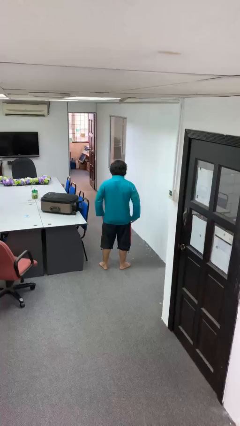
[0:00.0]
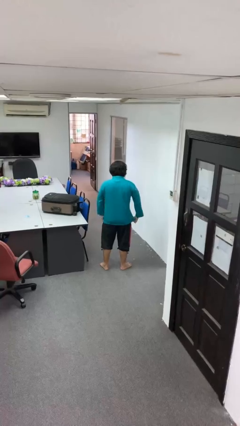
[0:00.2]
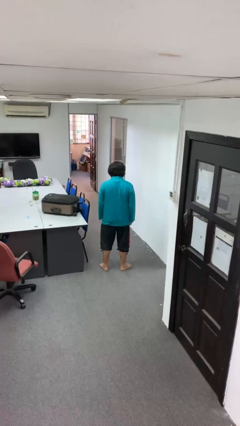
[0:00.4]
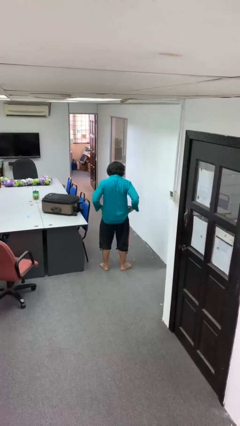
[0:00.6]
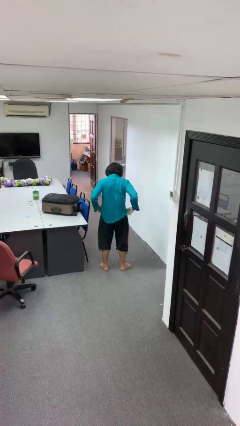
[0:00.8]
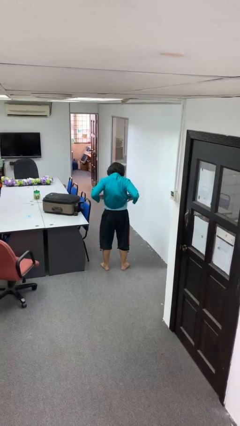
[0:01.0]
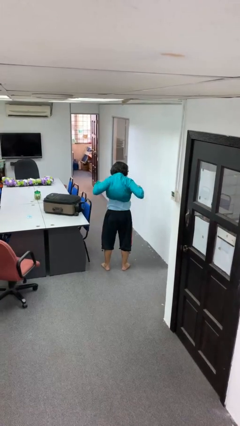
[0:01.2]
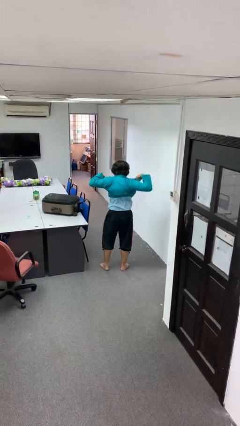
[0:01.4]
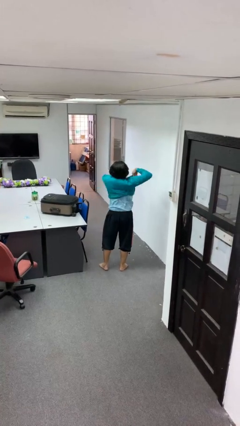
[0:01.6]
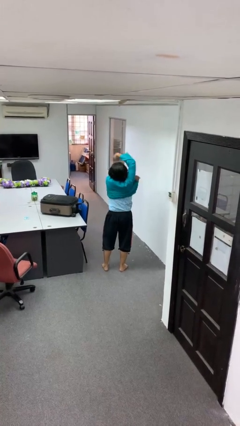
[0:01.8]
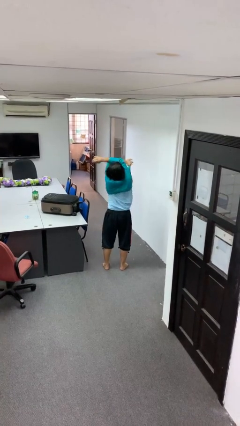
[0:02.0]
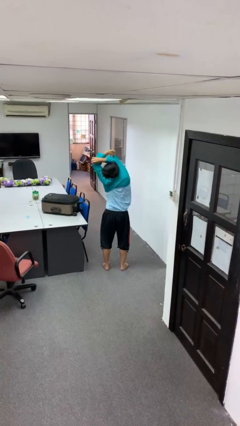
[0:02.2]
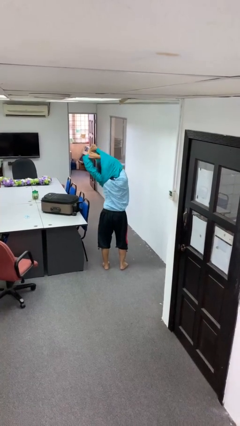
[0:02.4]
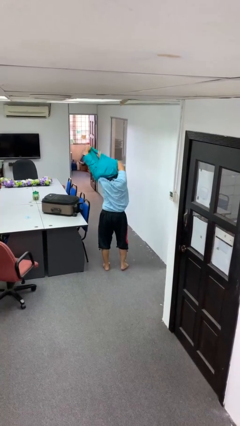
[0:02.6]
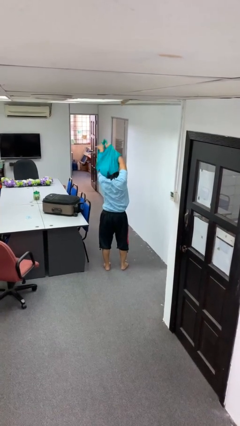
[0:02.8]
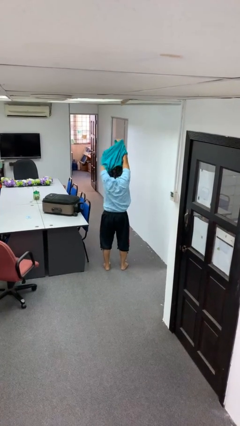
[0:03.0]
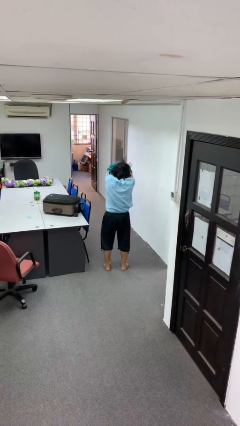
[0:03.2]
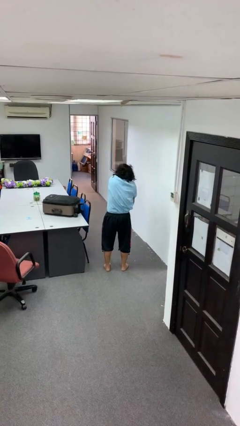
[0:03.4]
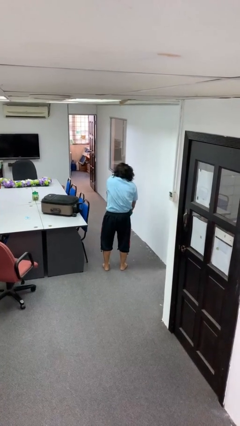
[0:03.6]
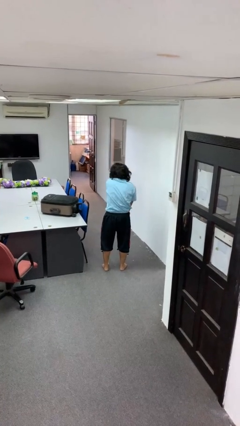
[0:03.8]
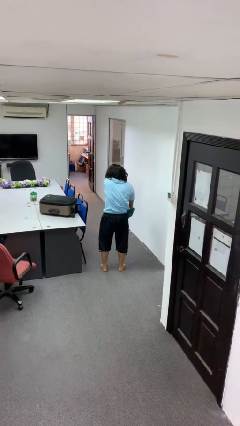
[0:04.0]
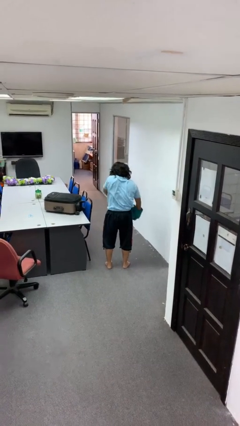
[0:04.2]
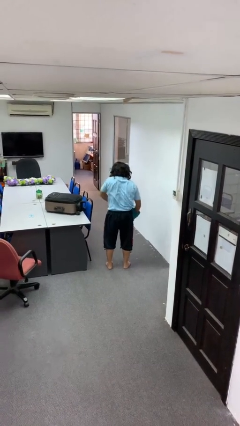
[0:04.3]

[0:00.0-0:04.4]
person takes off shirt

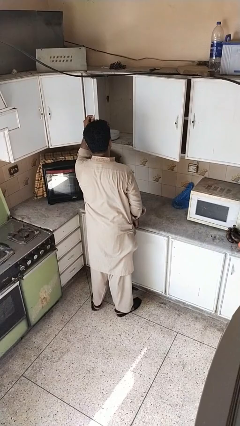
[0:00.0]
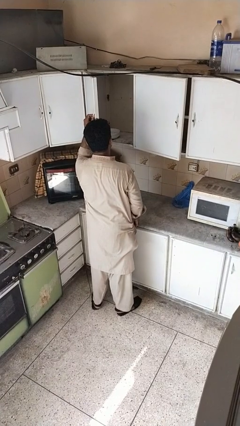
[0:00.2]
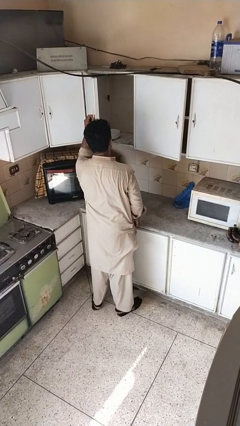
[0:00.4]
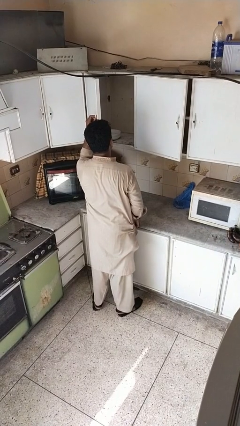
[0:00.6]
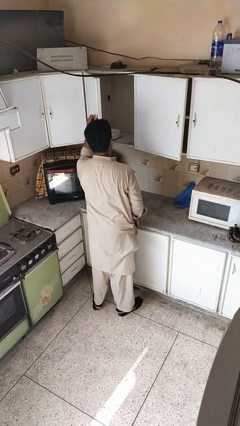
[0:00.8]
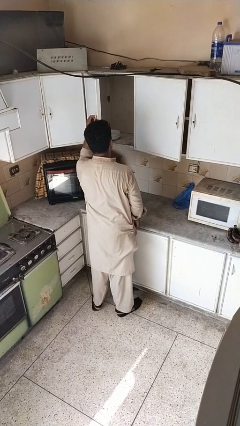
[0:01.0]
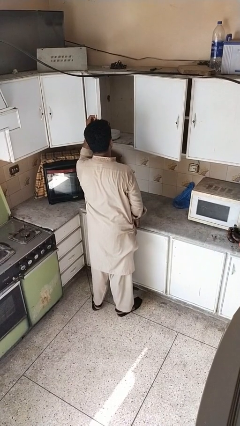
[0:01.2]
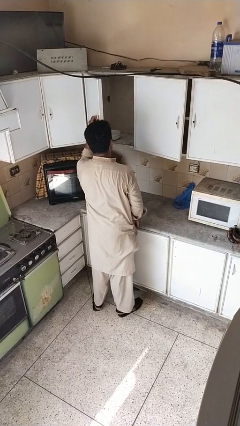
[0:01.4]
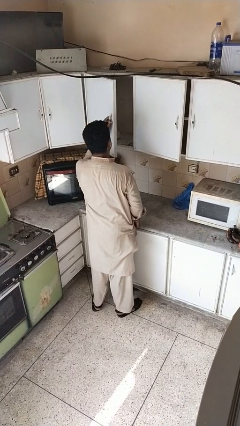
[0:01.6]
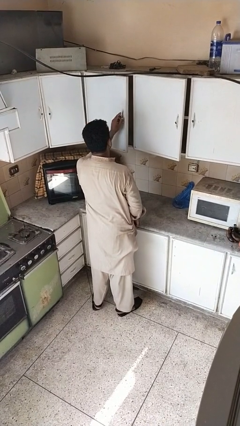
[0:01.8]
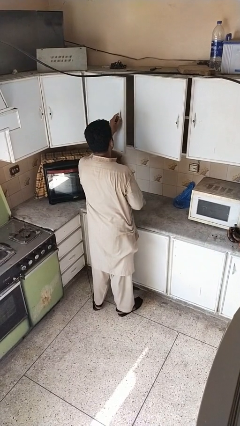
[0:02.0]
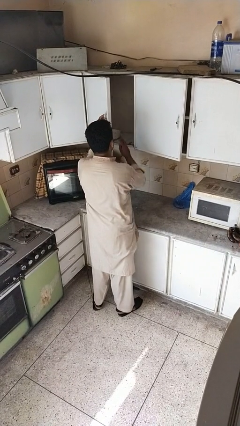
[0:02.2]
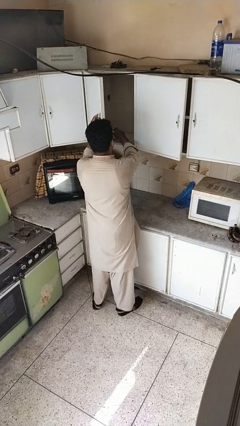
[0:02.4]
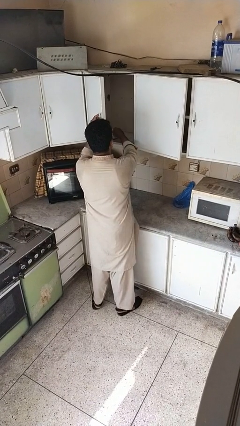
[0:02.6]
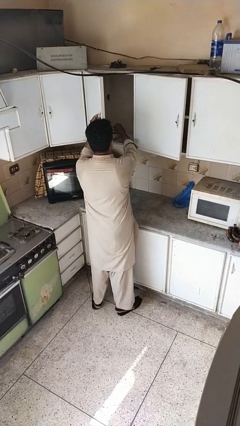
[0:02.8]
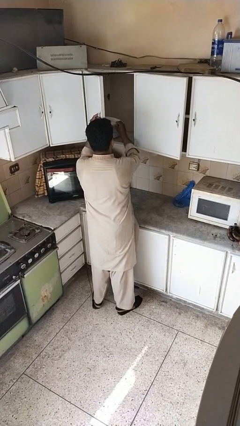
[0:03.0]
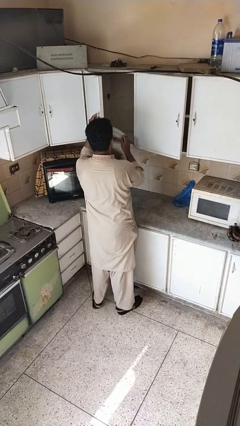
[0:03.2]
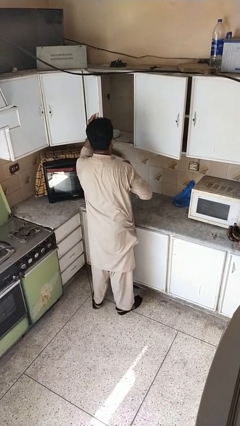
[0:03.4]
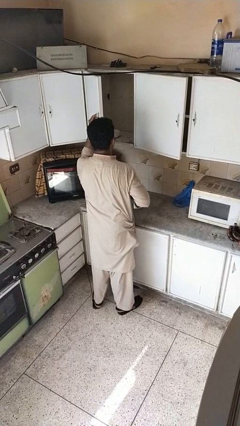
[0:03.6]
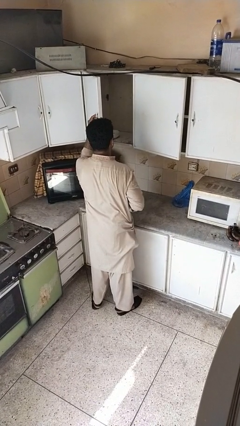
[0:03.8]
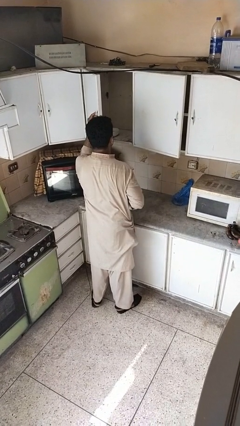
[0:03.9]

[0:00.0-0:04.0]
person takes object from cabinet

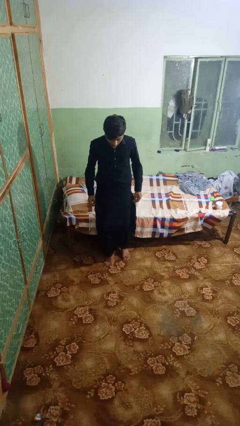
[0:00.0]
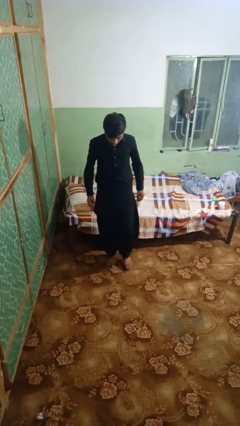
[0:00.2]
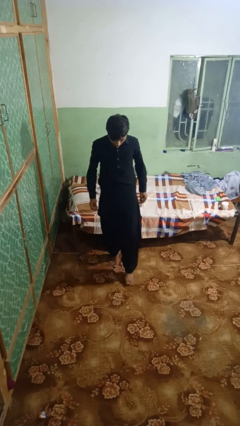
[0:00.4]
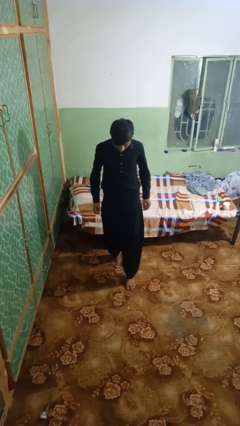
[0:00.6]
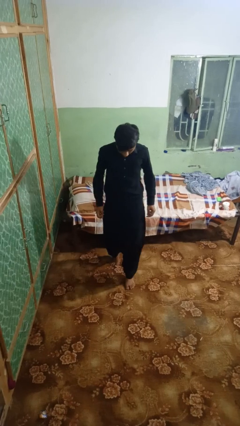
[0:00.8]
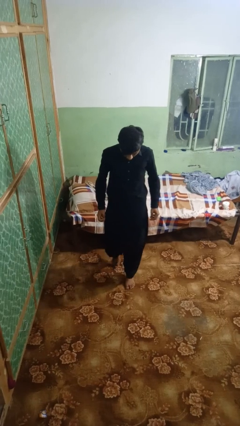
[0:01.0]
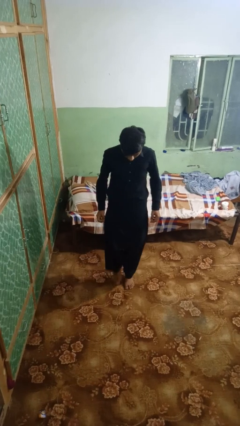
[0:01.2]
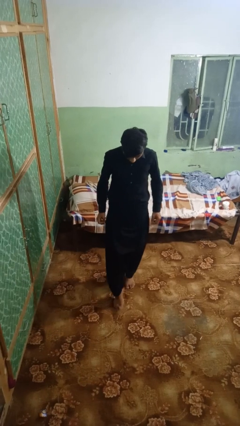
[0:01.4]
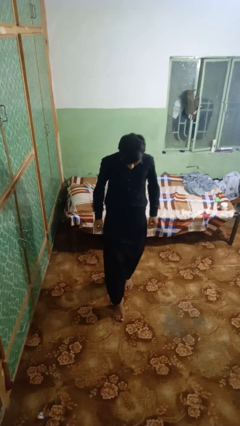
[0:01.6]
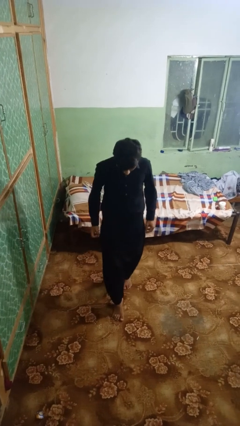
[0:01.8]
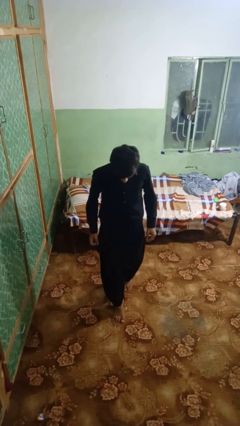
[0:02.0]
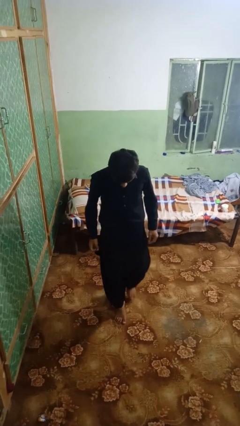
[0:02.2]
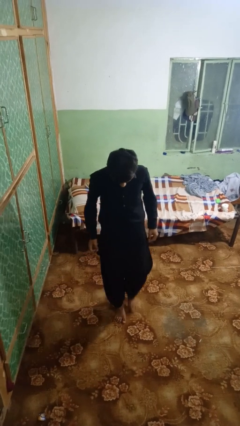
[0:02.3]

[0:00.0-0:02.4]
person walks tiptoe

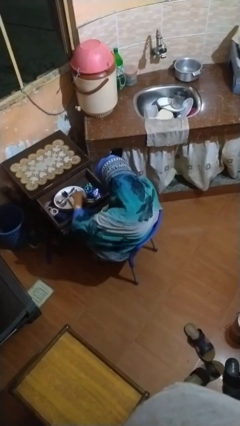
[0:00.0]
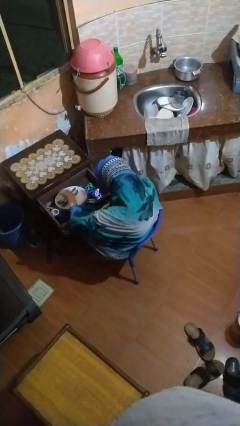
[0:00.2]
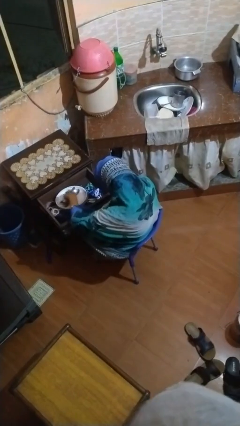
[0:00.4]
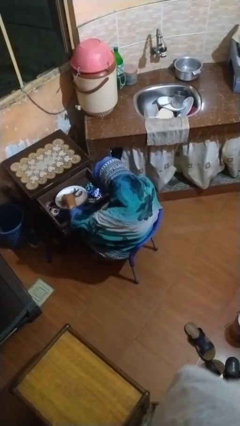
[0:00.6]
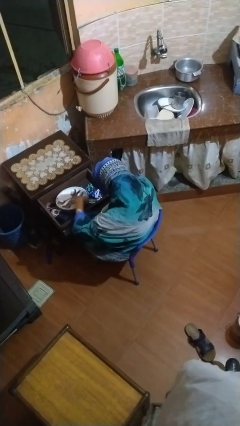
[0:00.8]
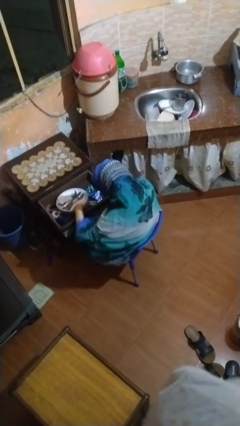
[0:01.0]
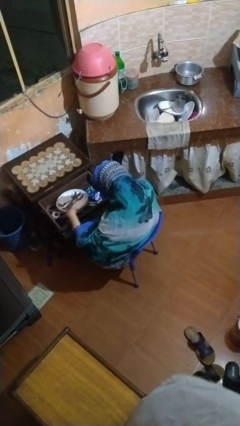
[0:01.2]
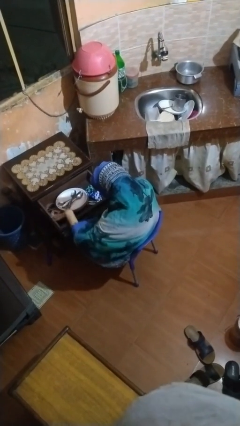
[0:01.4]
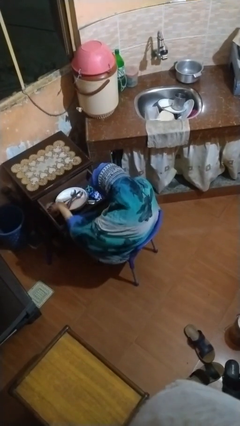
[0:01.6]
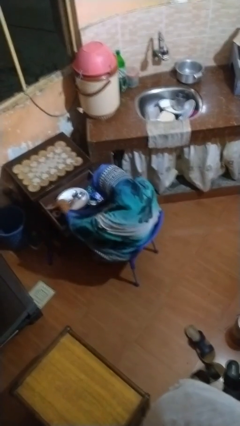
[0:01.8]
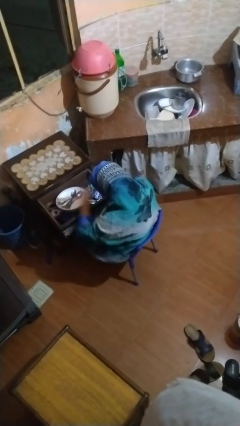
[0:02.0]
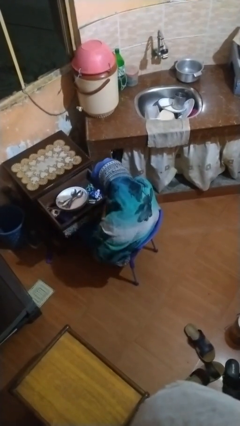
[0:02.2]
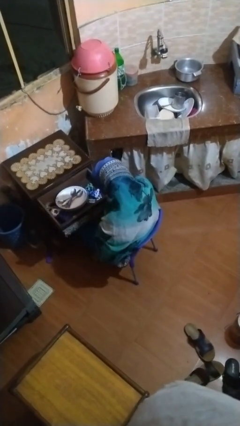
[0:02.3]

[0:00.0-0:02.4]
person searches in kitchen drawer

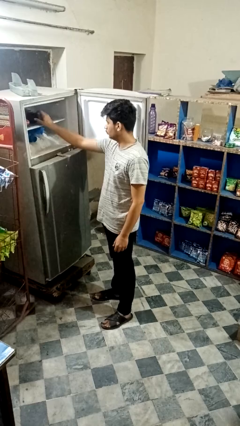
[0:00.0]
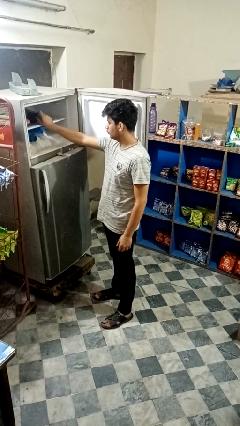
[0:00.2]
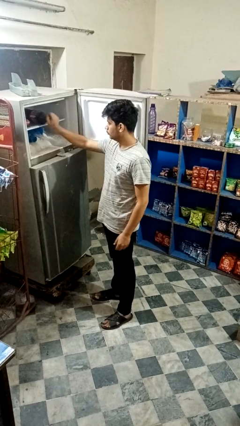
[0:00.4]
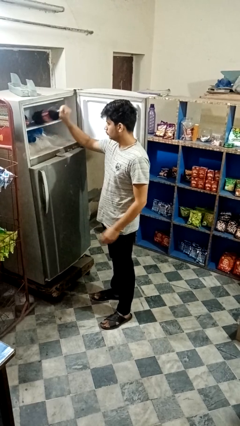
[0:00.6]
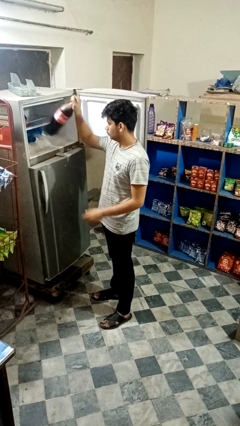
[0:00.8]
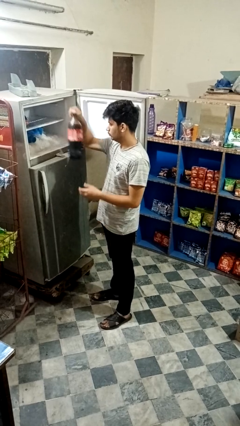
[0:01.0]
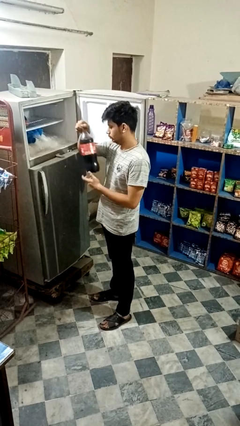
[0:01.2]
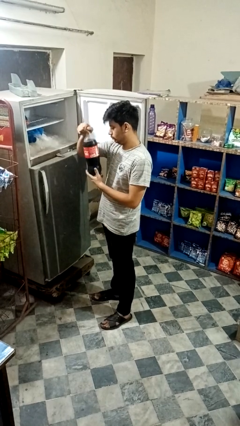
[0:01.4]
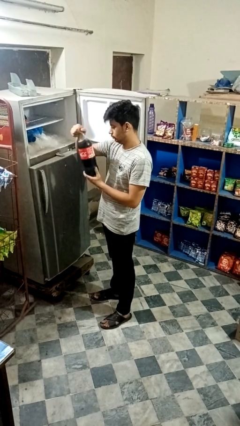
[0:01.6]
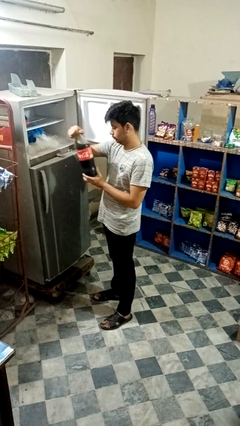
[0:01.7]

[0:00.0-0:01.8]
person takes object from refrigerator

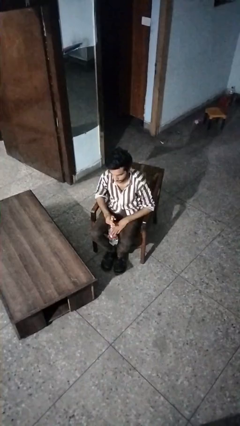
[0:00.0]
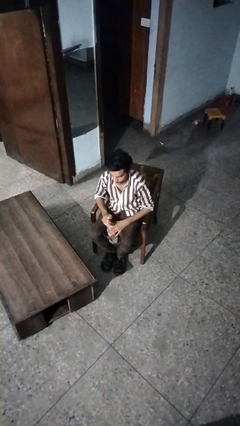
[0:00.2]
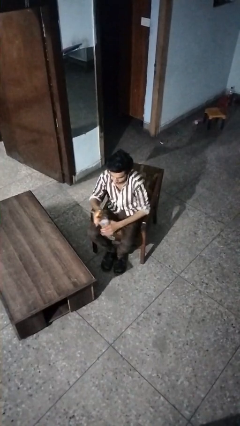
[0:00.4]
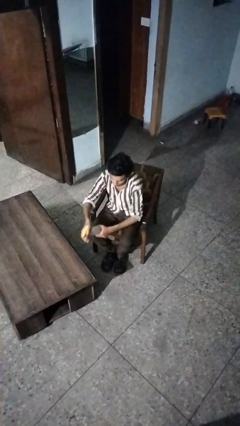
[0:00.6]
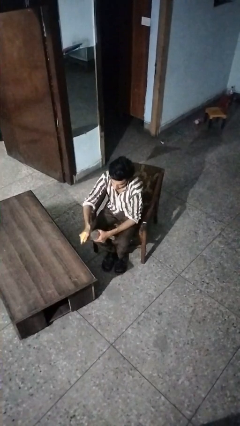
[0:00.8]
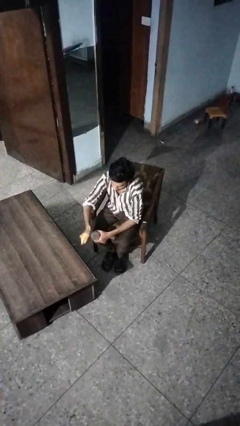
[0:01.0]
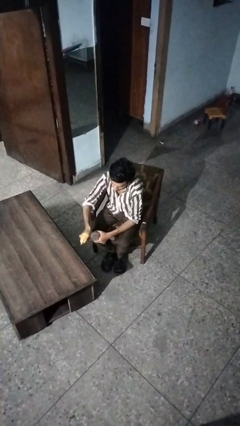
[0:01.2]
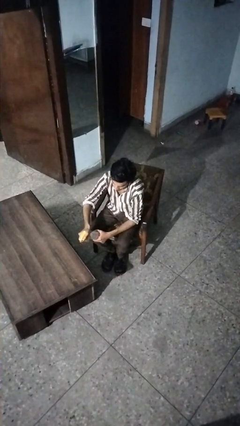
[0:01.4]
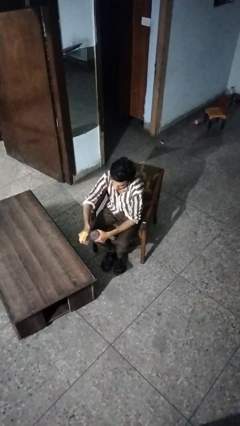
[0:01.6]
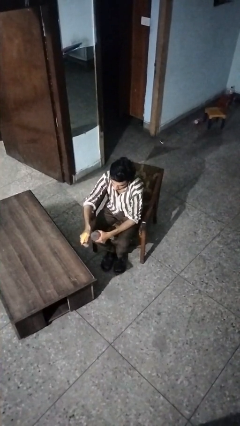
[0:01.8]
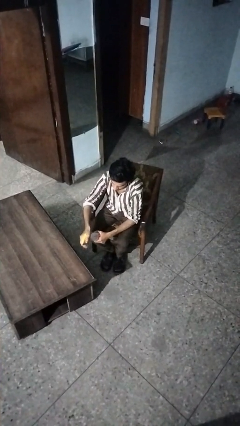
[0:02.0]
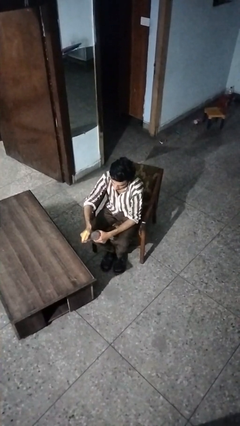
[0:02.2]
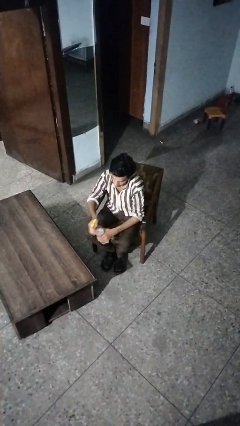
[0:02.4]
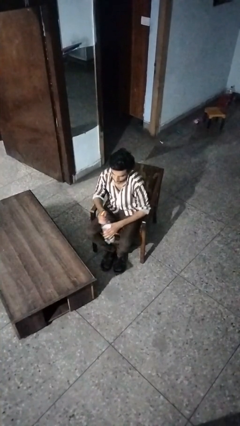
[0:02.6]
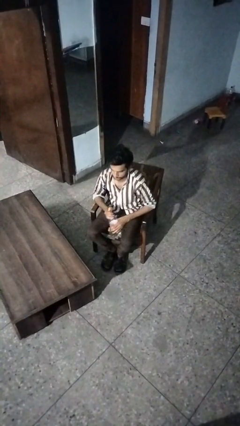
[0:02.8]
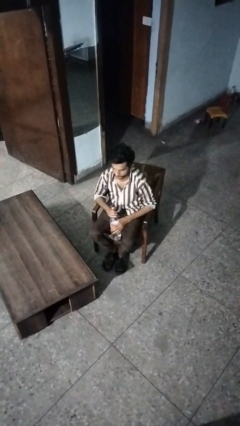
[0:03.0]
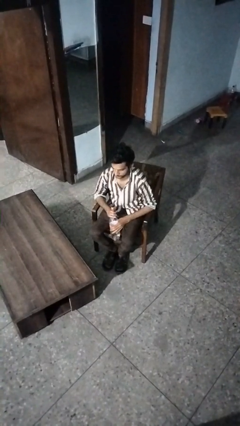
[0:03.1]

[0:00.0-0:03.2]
person sprays from bottle
